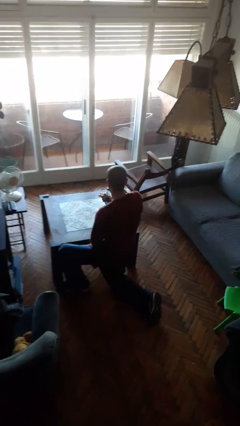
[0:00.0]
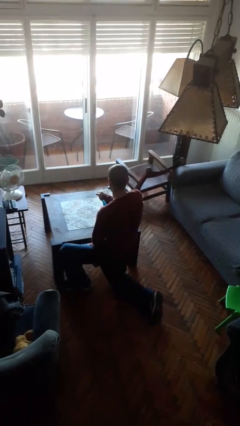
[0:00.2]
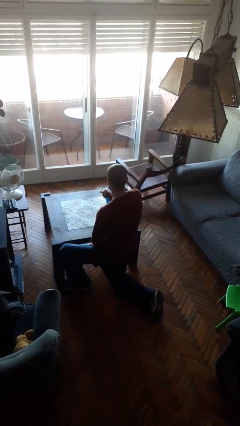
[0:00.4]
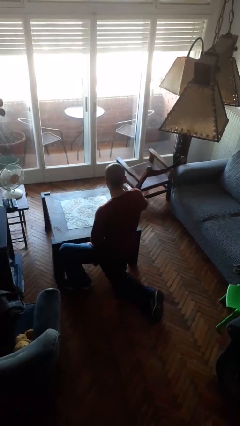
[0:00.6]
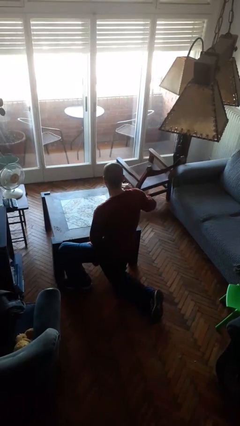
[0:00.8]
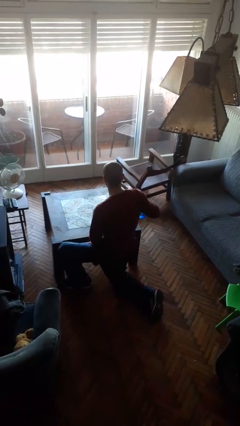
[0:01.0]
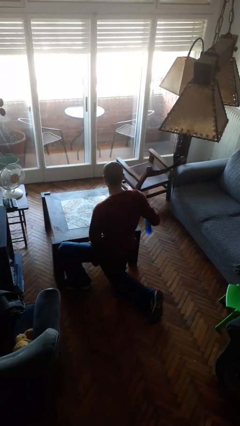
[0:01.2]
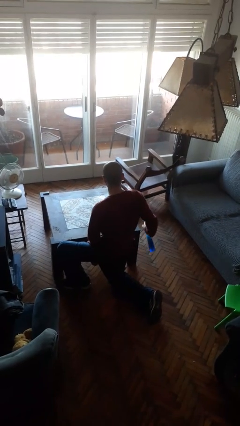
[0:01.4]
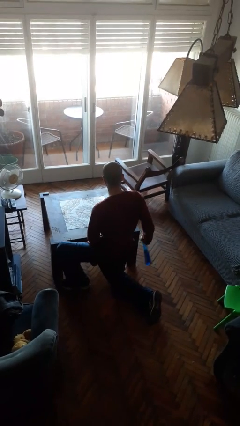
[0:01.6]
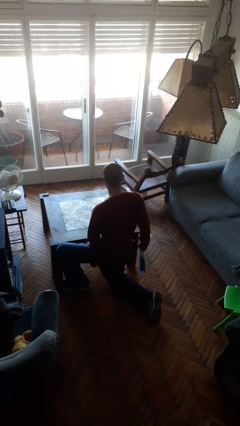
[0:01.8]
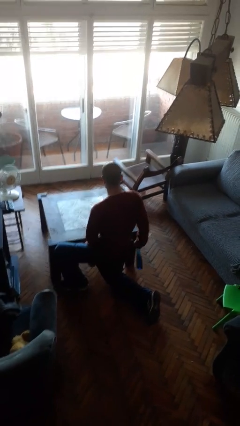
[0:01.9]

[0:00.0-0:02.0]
person sprays from bottle

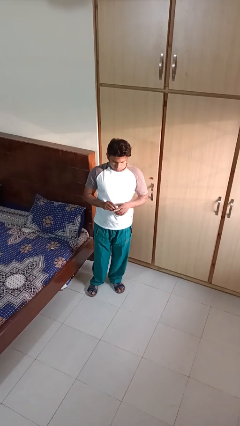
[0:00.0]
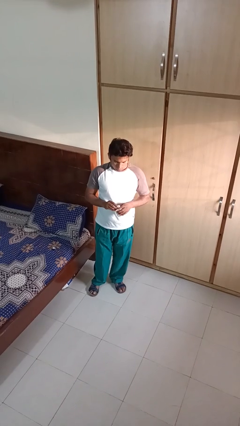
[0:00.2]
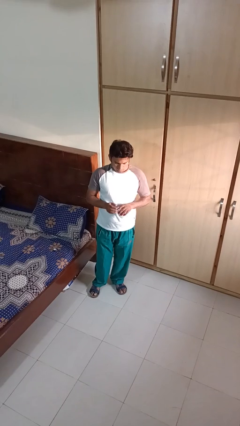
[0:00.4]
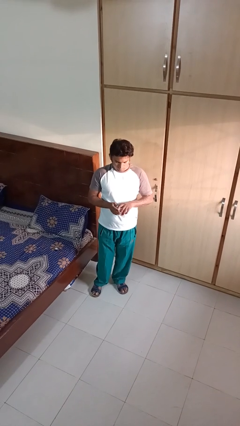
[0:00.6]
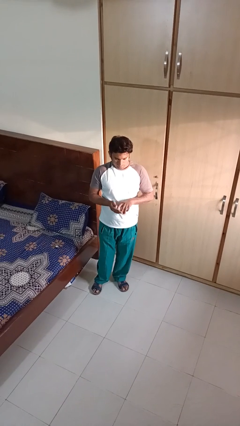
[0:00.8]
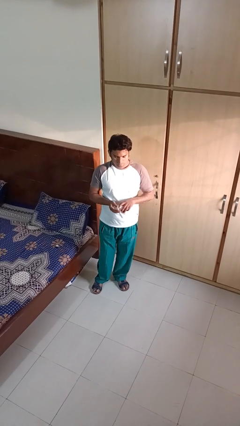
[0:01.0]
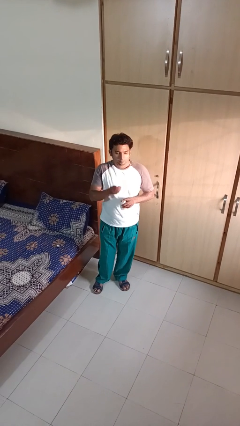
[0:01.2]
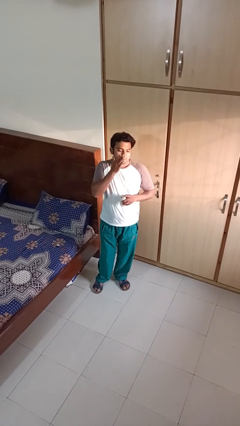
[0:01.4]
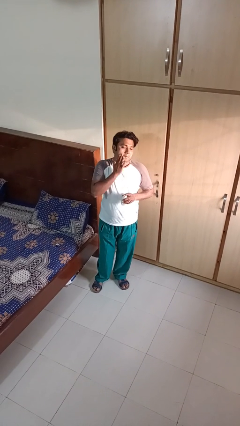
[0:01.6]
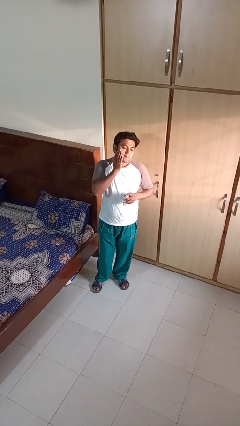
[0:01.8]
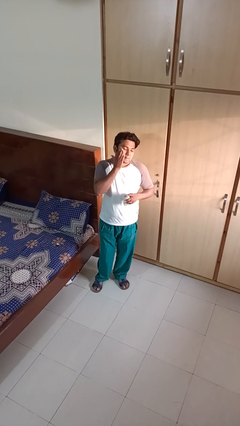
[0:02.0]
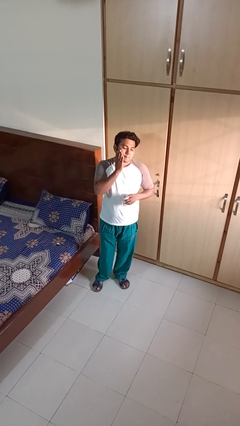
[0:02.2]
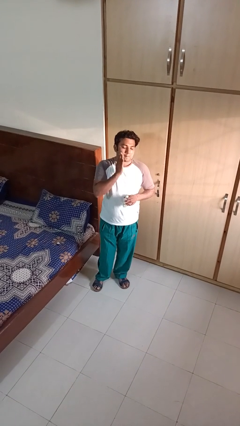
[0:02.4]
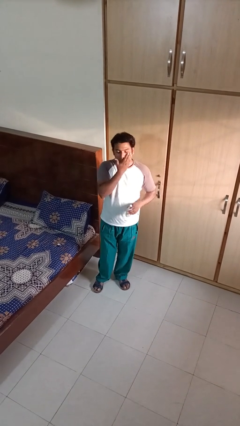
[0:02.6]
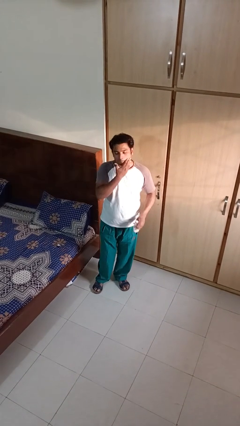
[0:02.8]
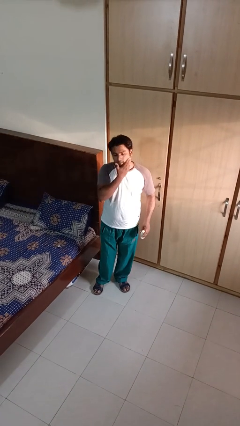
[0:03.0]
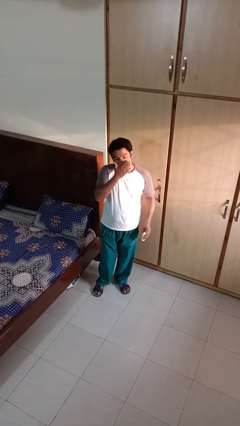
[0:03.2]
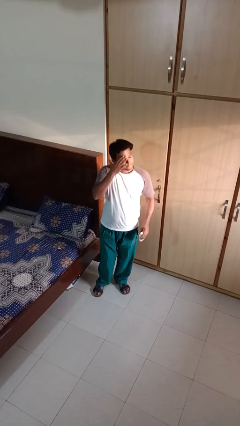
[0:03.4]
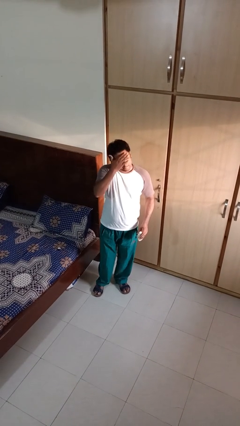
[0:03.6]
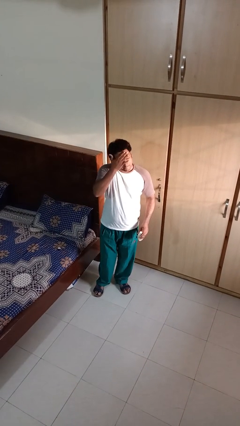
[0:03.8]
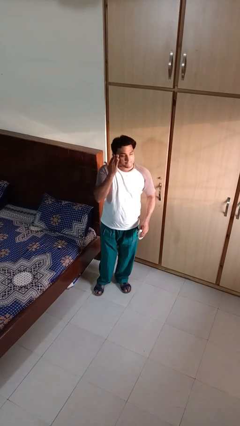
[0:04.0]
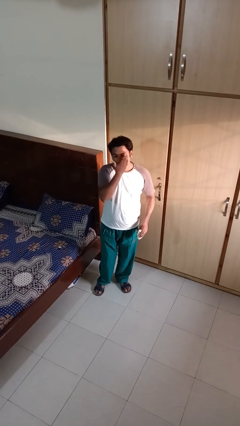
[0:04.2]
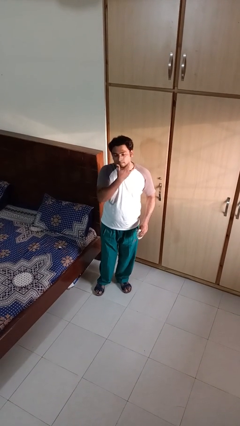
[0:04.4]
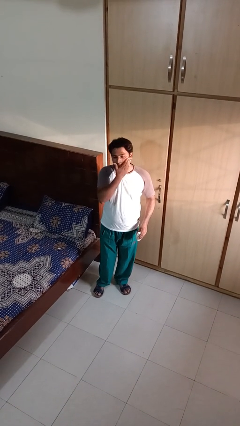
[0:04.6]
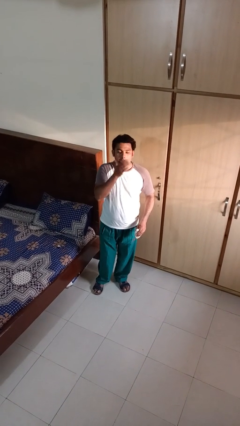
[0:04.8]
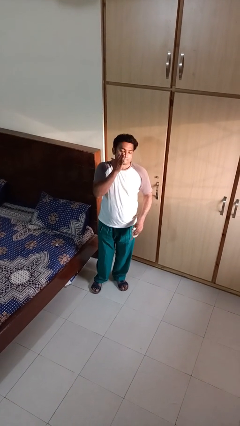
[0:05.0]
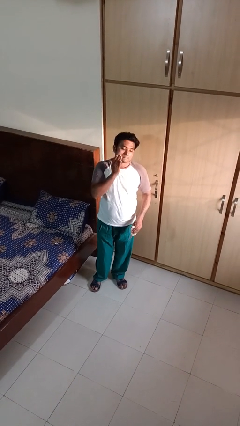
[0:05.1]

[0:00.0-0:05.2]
person applies sunscreen

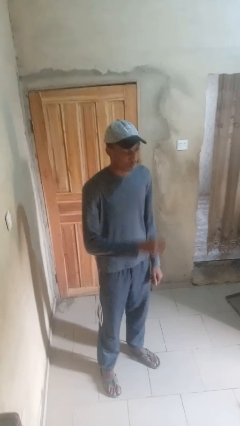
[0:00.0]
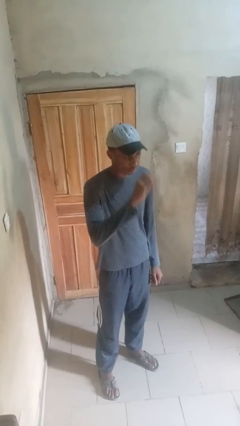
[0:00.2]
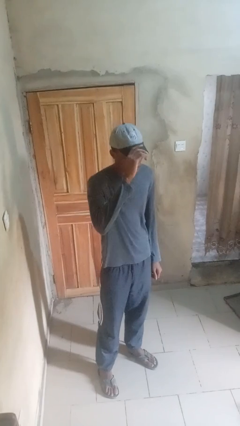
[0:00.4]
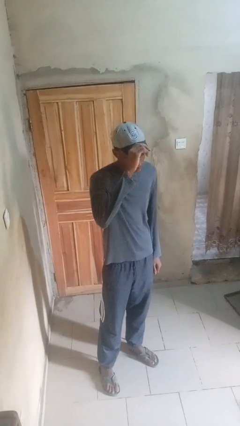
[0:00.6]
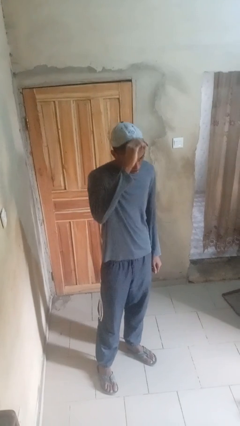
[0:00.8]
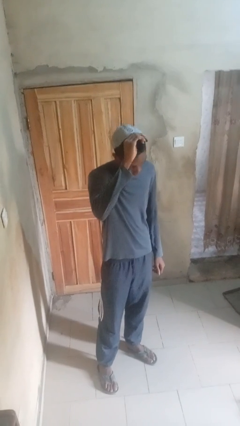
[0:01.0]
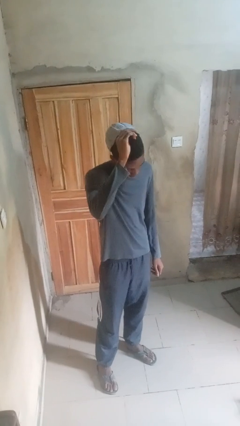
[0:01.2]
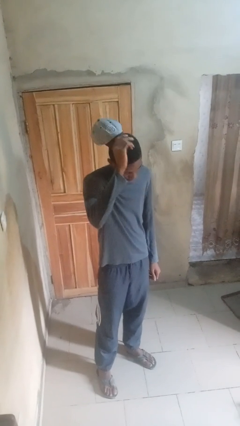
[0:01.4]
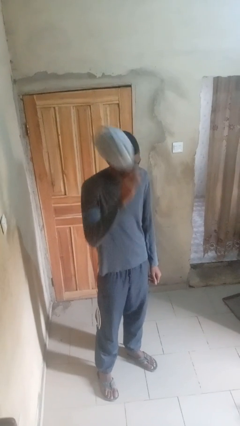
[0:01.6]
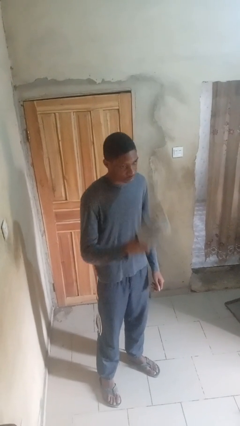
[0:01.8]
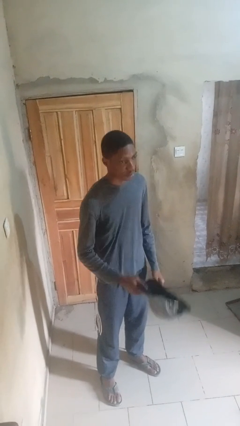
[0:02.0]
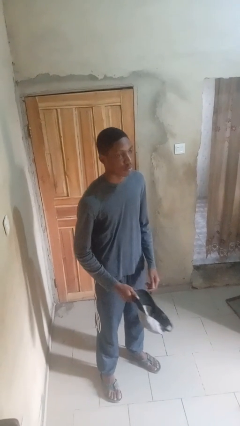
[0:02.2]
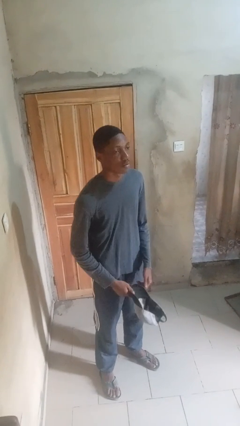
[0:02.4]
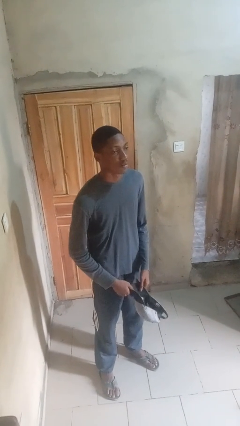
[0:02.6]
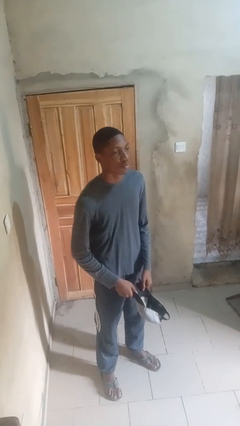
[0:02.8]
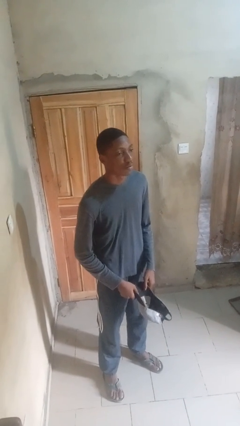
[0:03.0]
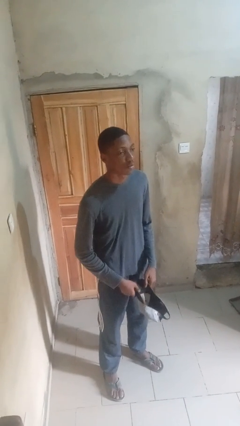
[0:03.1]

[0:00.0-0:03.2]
person takes off hat

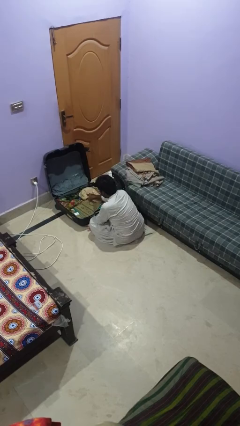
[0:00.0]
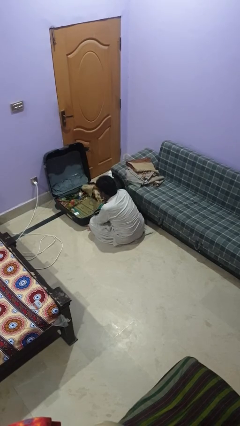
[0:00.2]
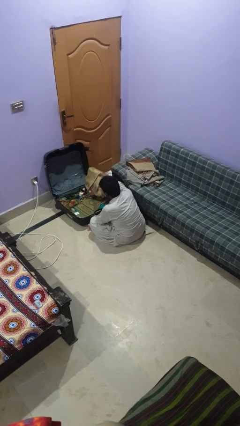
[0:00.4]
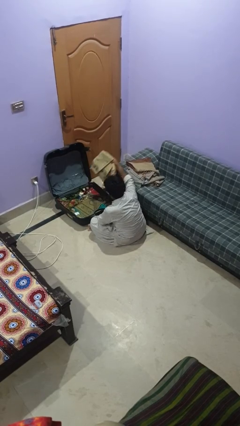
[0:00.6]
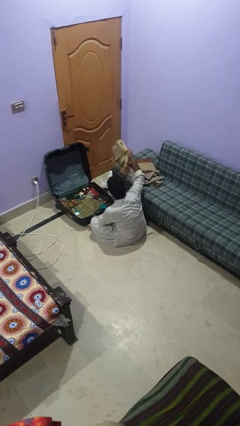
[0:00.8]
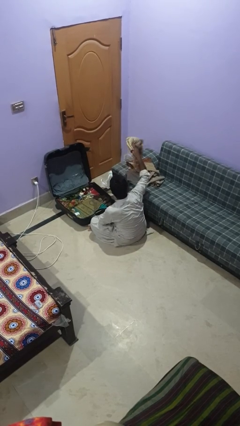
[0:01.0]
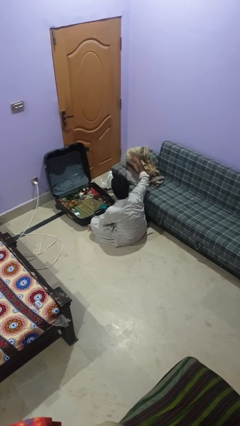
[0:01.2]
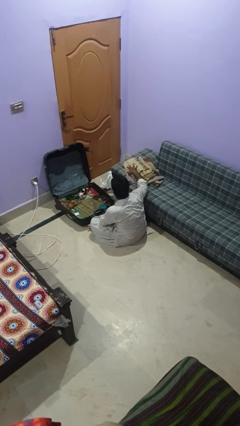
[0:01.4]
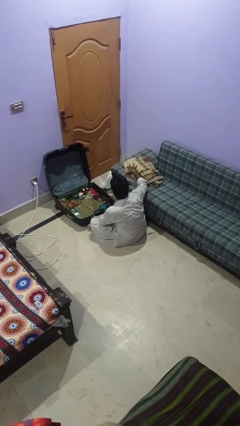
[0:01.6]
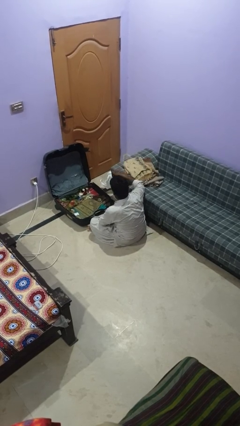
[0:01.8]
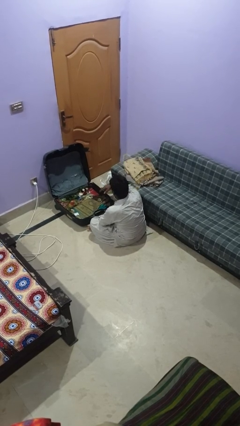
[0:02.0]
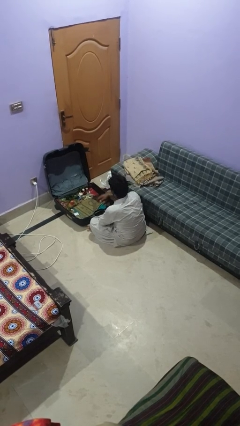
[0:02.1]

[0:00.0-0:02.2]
person unloads clothes from suitcase

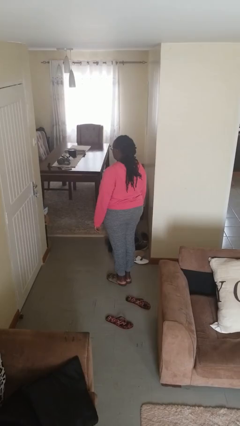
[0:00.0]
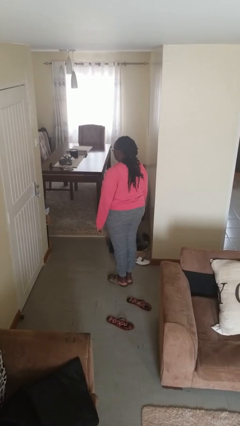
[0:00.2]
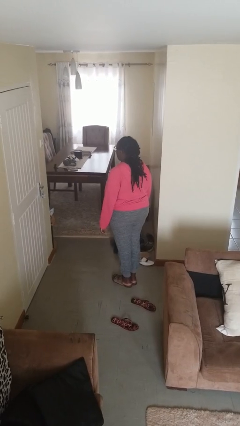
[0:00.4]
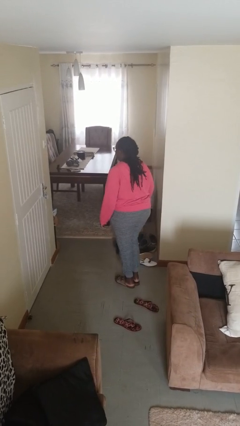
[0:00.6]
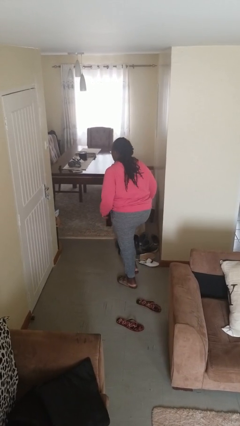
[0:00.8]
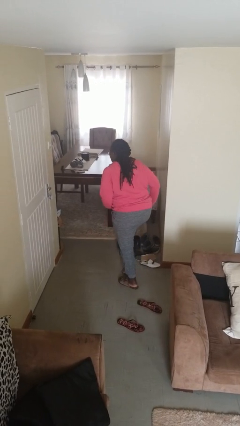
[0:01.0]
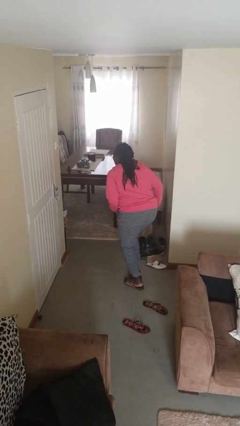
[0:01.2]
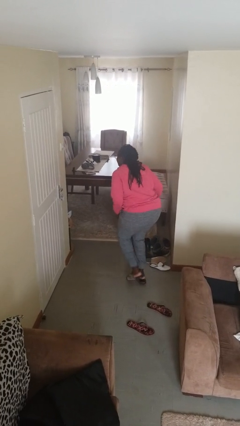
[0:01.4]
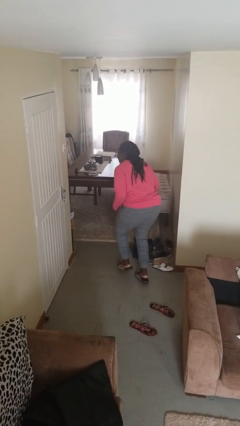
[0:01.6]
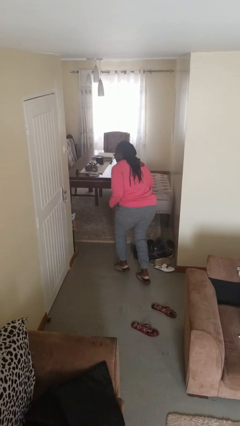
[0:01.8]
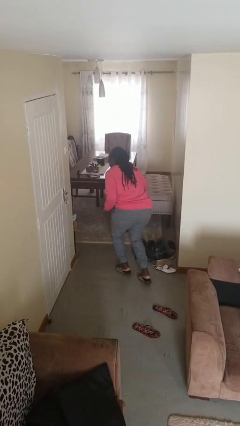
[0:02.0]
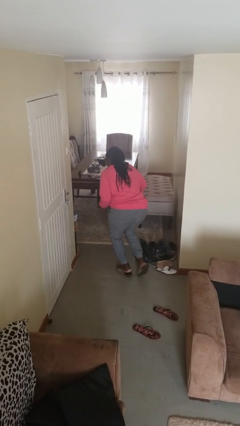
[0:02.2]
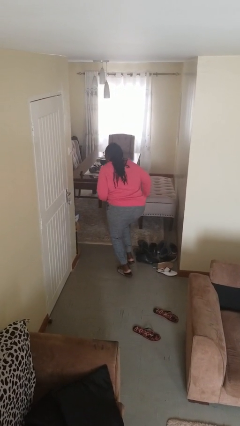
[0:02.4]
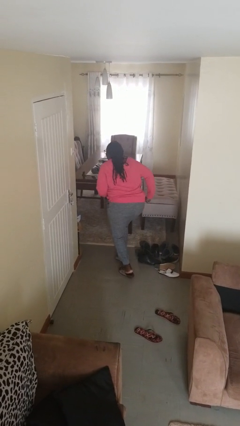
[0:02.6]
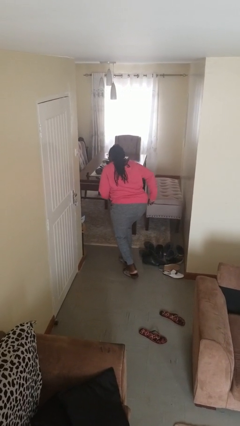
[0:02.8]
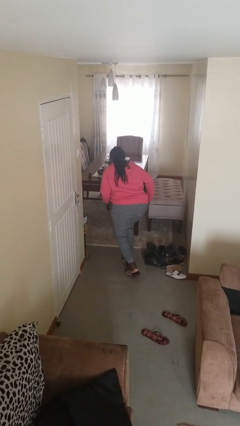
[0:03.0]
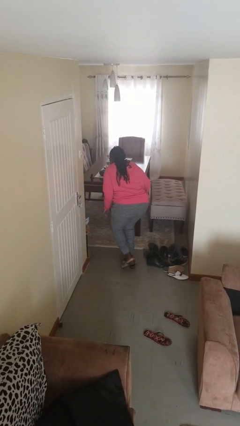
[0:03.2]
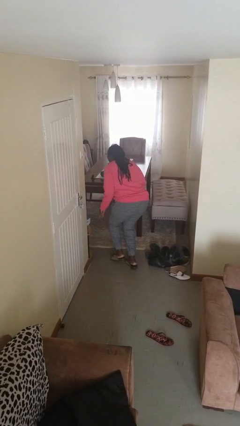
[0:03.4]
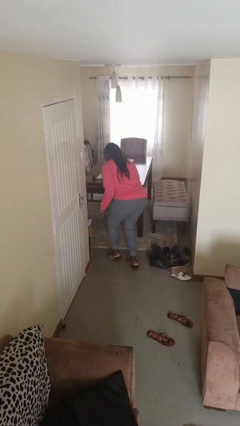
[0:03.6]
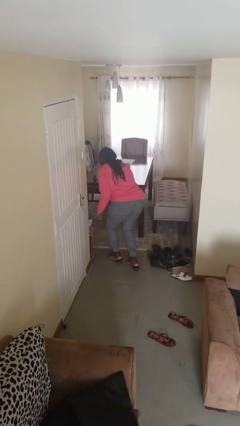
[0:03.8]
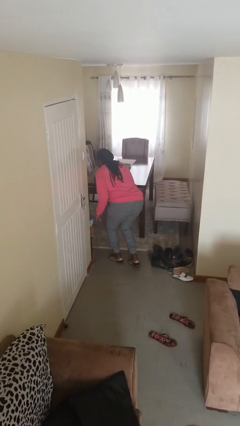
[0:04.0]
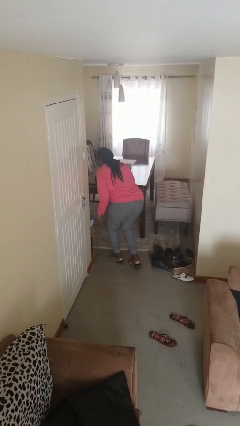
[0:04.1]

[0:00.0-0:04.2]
person walks tiptoe

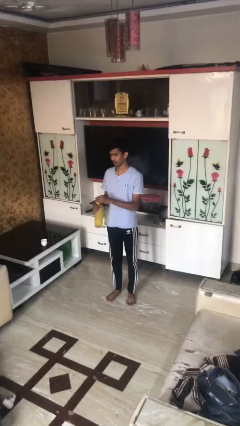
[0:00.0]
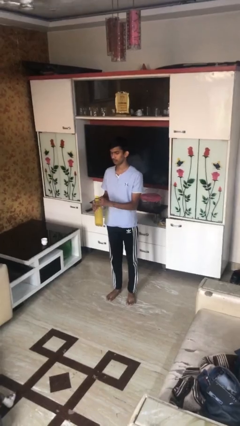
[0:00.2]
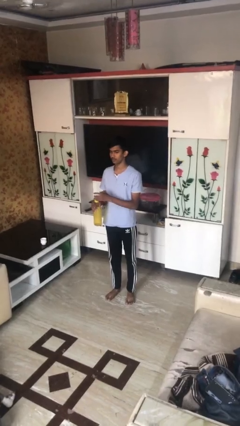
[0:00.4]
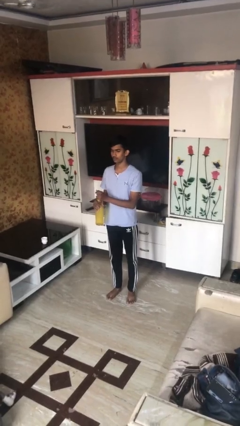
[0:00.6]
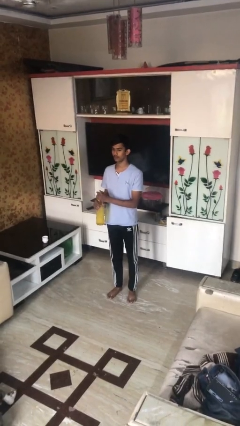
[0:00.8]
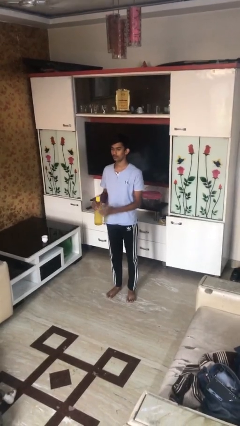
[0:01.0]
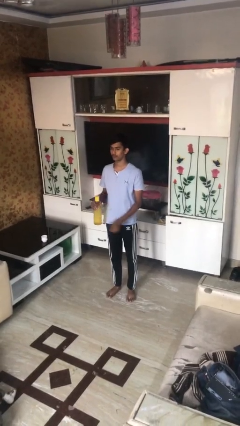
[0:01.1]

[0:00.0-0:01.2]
person screws lid to bottle
